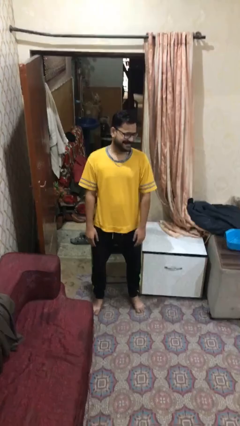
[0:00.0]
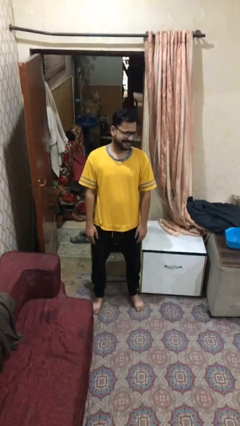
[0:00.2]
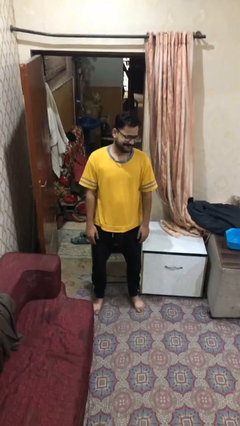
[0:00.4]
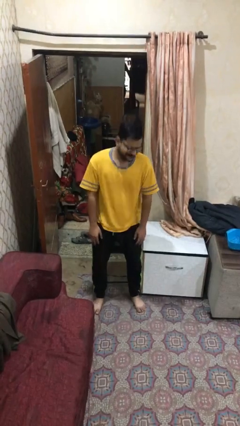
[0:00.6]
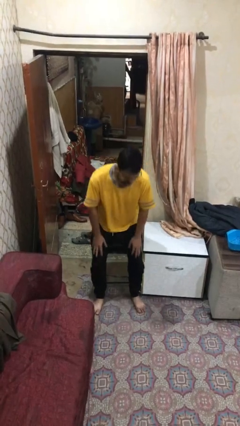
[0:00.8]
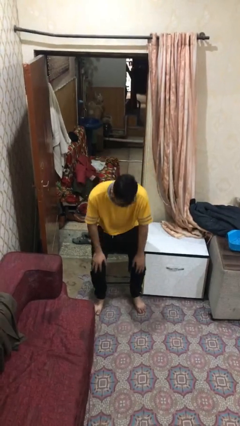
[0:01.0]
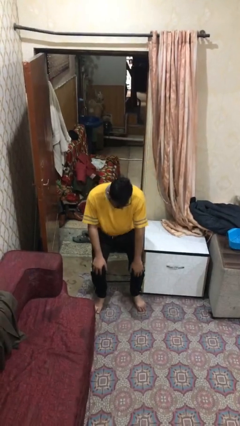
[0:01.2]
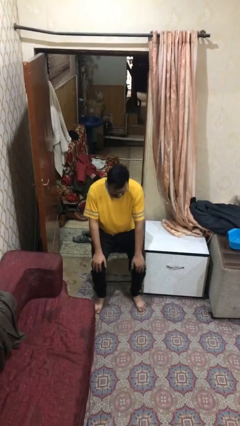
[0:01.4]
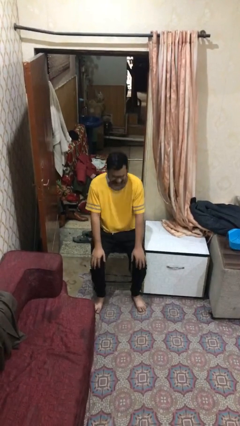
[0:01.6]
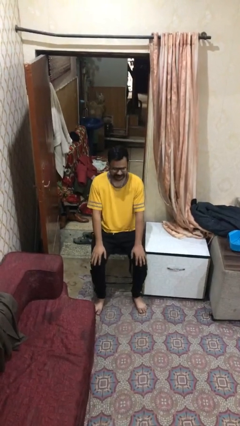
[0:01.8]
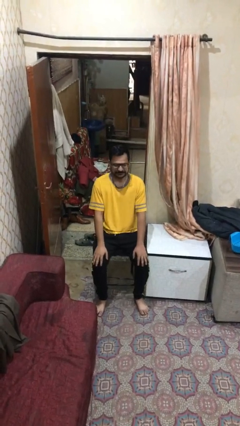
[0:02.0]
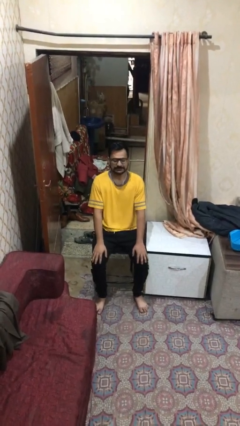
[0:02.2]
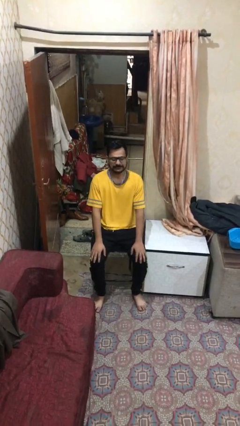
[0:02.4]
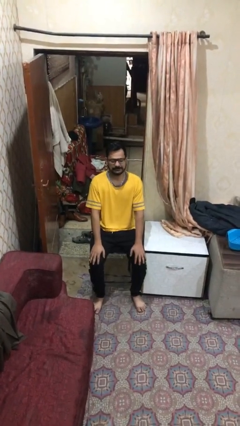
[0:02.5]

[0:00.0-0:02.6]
person sits down

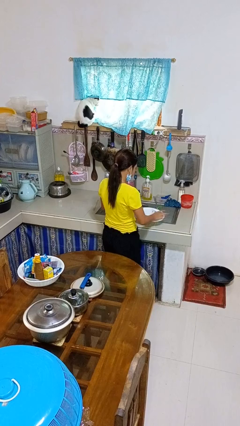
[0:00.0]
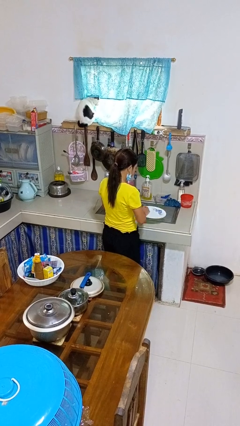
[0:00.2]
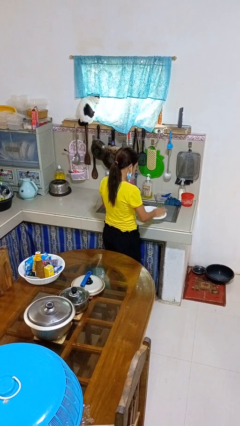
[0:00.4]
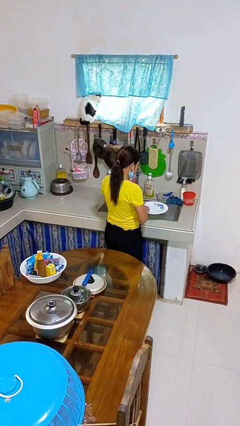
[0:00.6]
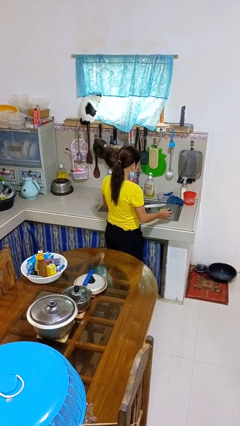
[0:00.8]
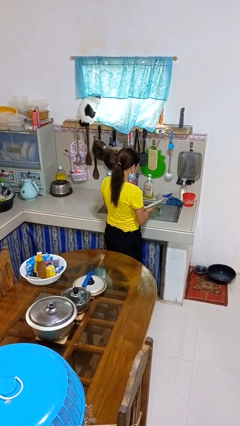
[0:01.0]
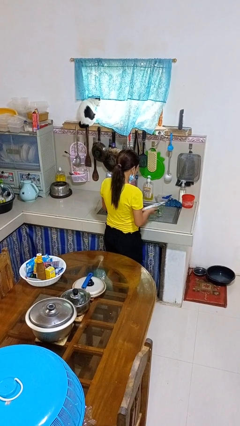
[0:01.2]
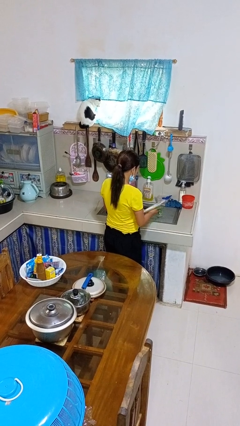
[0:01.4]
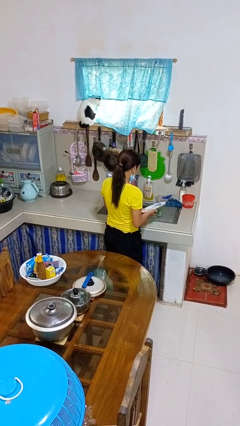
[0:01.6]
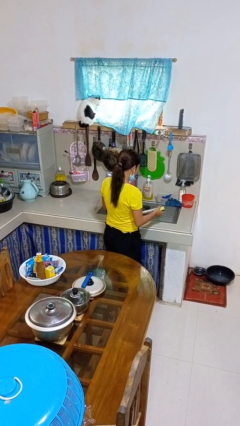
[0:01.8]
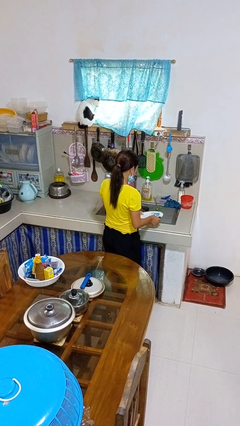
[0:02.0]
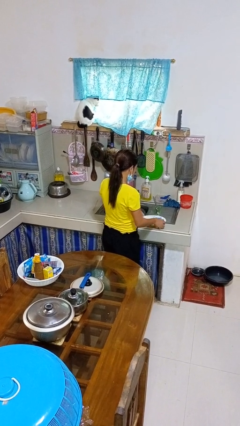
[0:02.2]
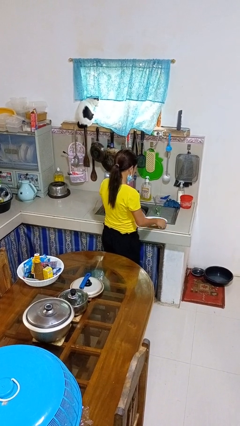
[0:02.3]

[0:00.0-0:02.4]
person washes dish

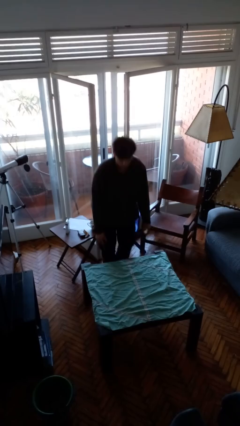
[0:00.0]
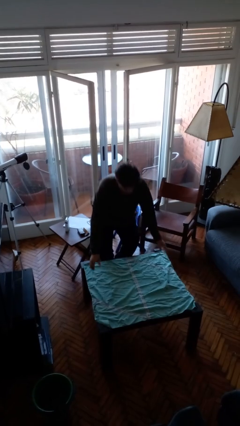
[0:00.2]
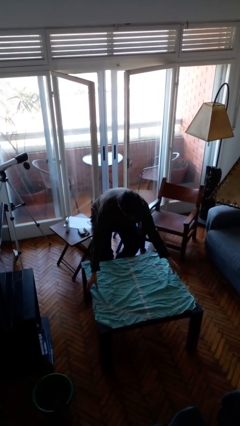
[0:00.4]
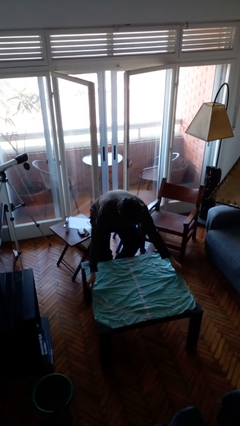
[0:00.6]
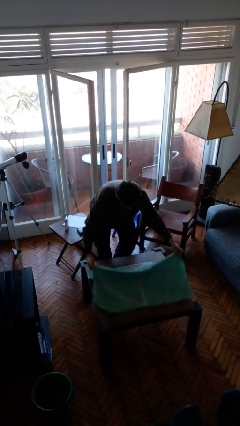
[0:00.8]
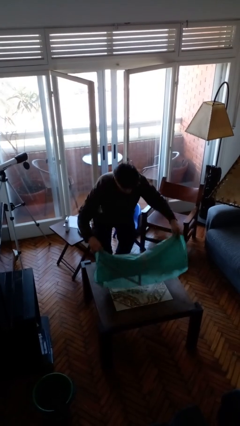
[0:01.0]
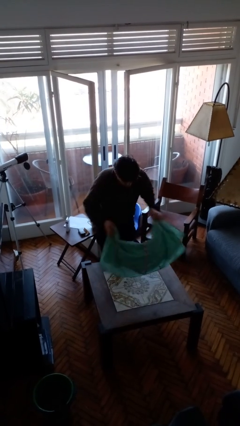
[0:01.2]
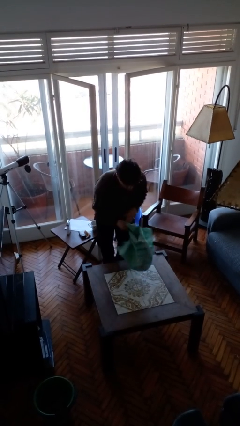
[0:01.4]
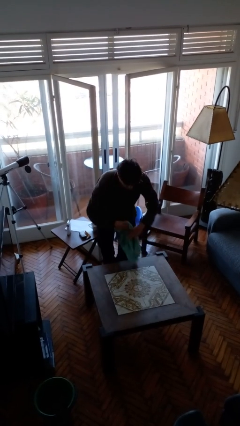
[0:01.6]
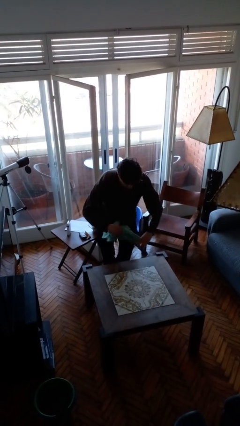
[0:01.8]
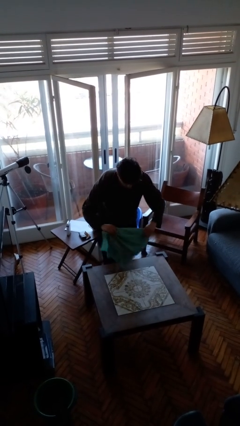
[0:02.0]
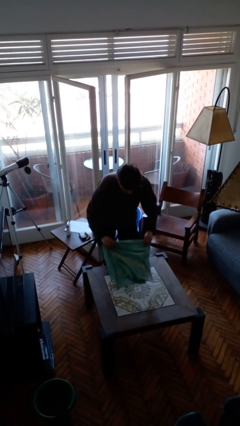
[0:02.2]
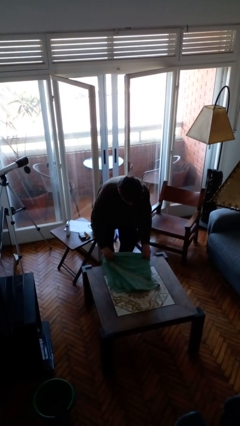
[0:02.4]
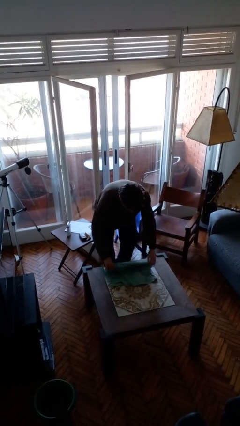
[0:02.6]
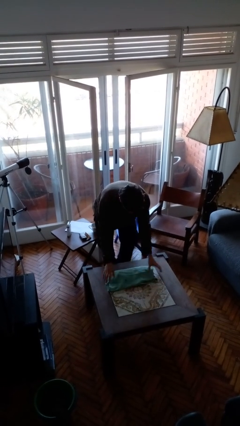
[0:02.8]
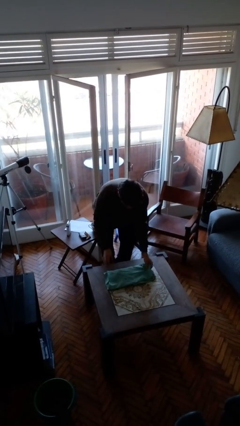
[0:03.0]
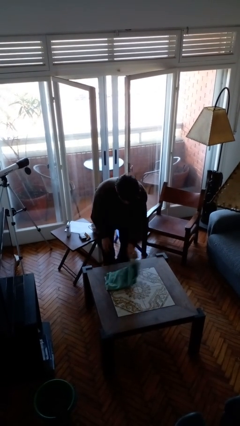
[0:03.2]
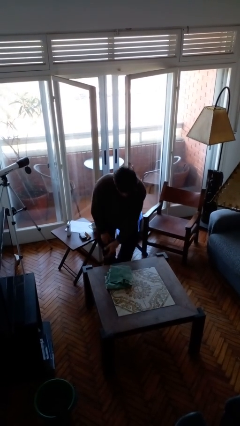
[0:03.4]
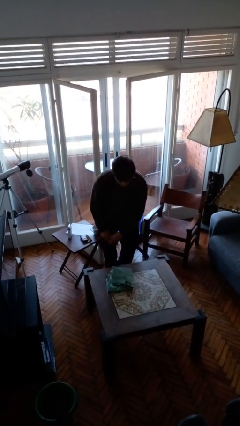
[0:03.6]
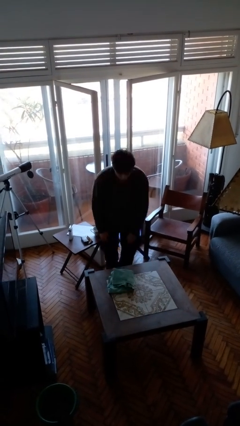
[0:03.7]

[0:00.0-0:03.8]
person folds tablecloth

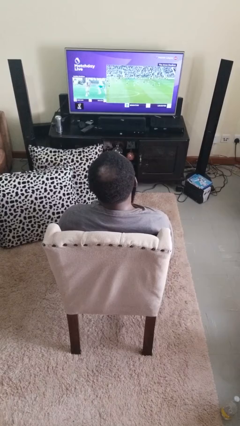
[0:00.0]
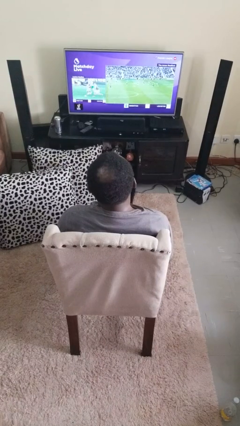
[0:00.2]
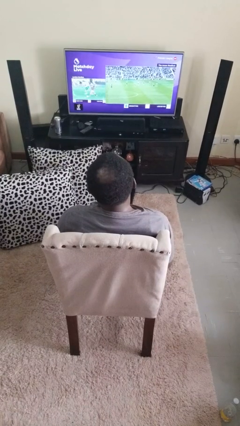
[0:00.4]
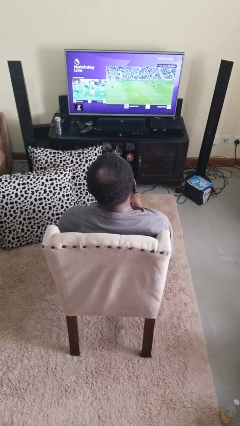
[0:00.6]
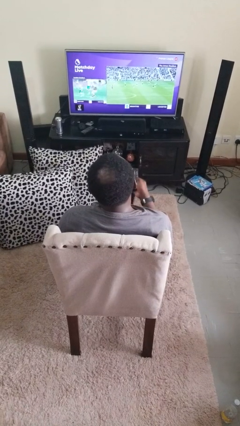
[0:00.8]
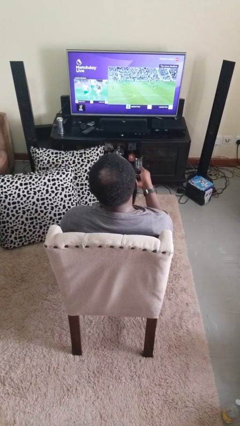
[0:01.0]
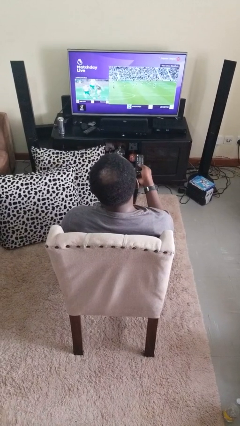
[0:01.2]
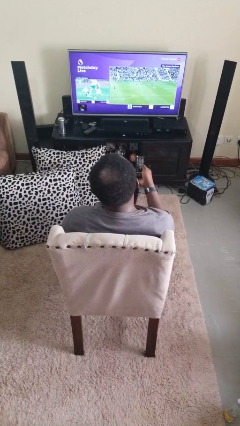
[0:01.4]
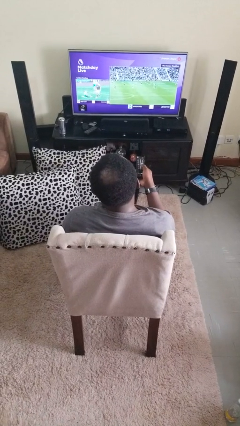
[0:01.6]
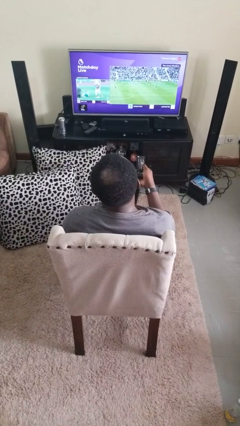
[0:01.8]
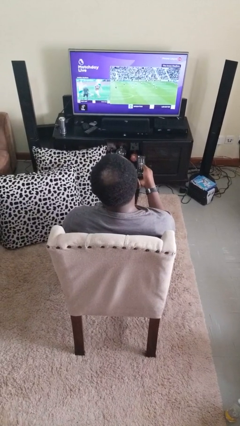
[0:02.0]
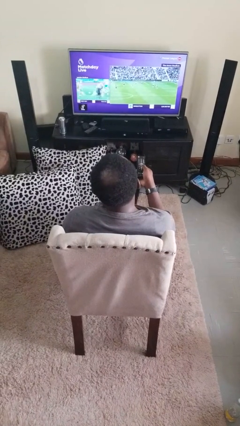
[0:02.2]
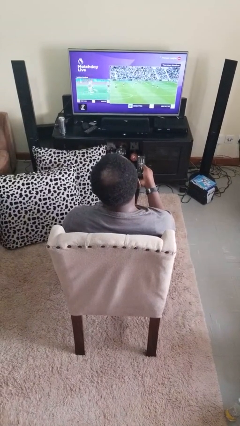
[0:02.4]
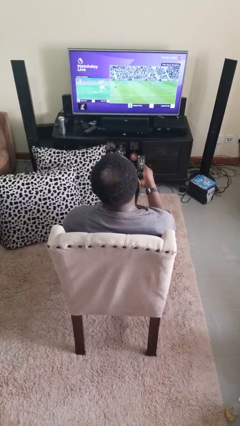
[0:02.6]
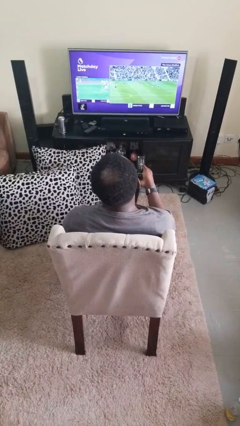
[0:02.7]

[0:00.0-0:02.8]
person uses television remote

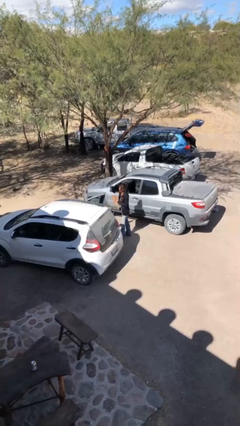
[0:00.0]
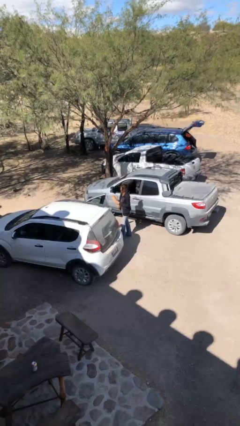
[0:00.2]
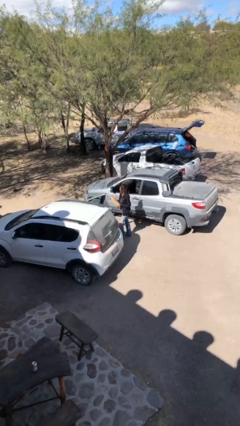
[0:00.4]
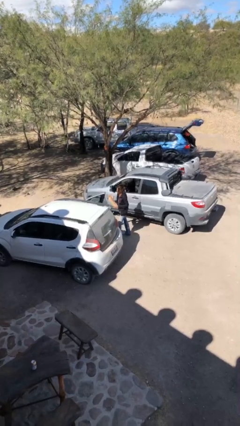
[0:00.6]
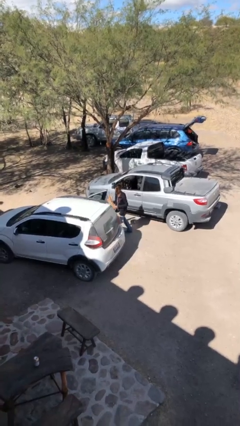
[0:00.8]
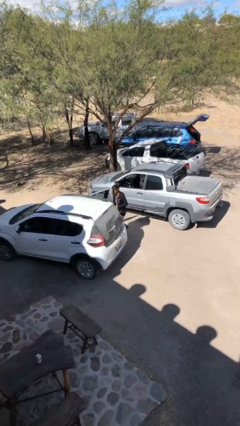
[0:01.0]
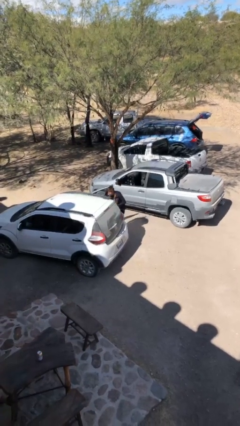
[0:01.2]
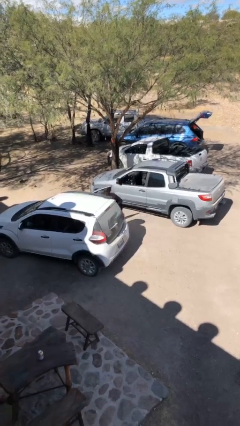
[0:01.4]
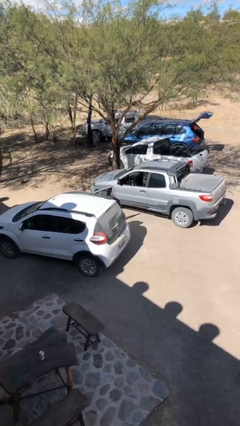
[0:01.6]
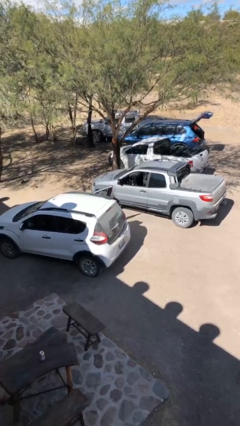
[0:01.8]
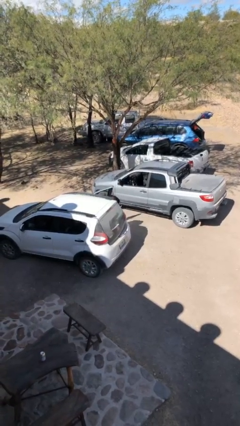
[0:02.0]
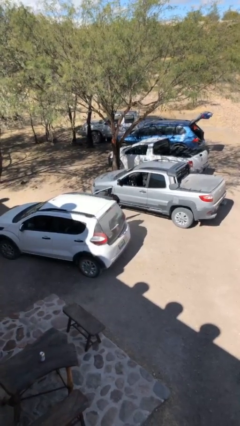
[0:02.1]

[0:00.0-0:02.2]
person loads car

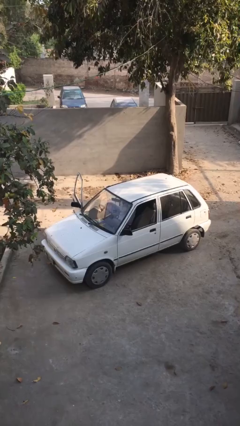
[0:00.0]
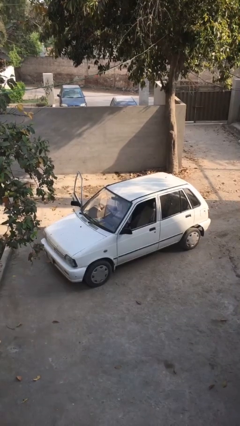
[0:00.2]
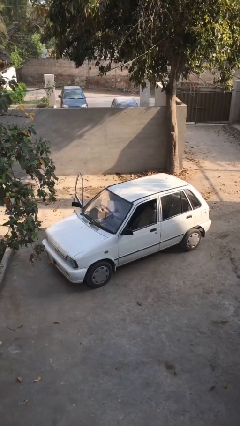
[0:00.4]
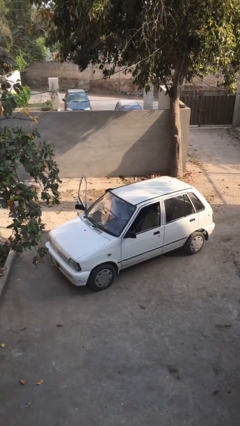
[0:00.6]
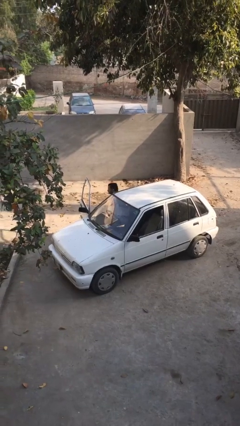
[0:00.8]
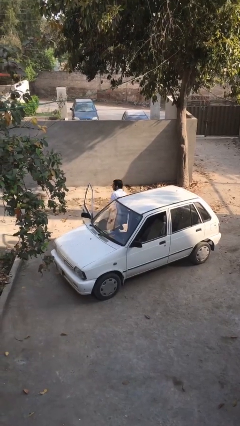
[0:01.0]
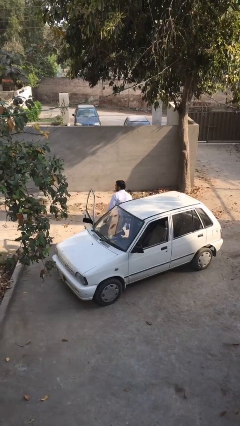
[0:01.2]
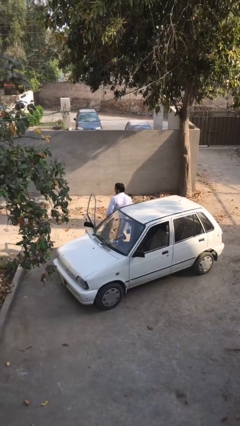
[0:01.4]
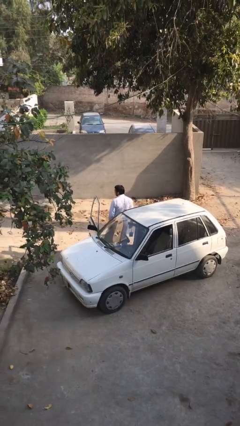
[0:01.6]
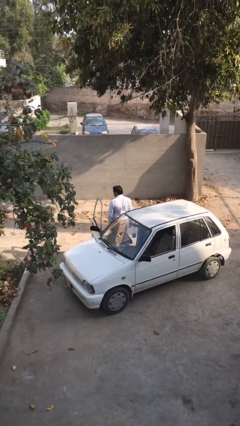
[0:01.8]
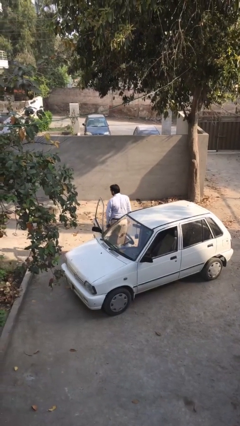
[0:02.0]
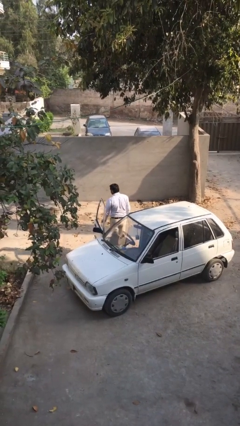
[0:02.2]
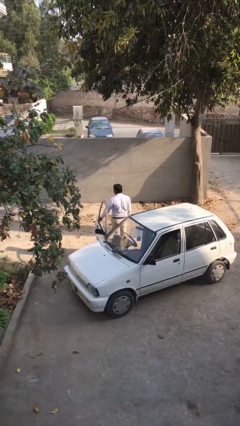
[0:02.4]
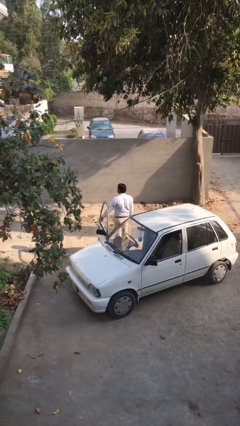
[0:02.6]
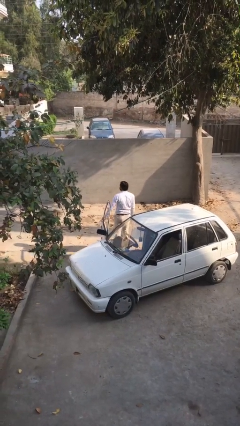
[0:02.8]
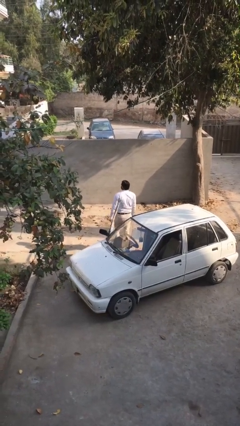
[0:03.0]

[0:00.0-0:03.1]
person exits car

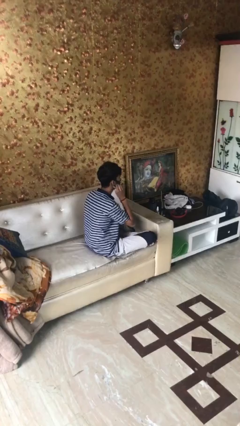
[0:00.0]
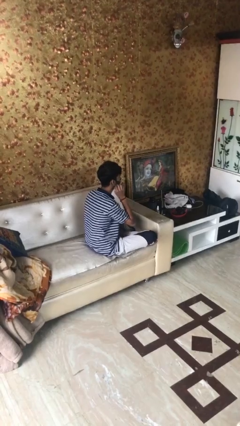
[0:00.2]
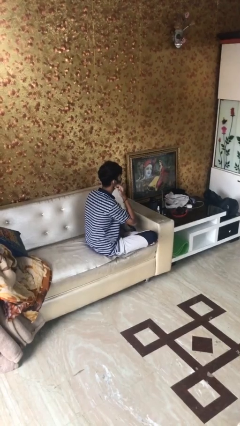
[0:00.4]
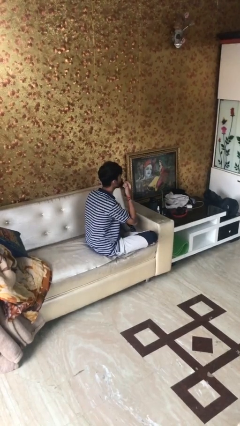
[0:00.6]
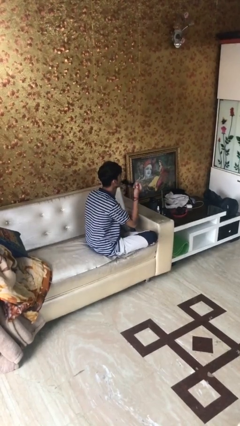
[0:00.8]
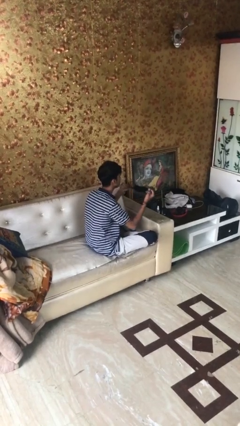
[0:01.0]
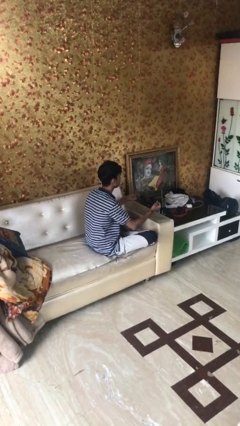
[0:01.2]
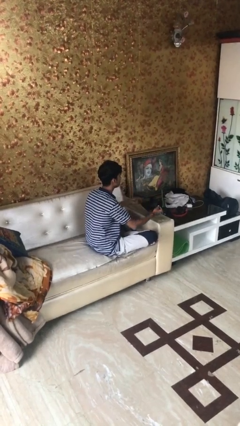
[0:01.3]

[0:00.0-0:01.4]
person takes off facemask
